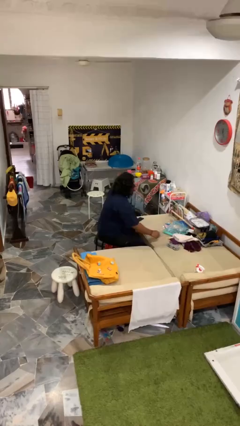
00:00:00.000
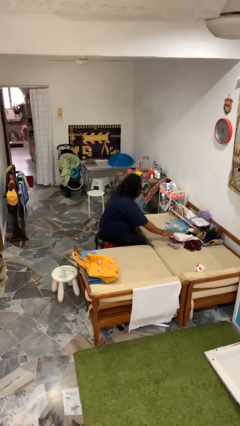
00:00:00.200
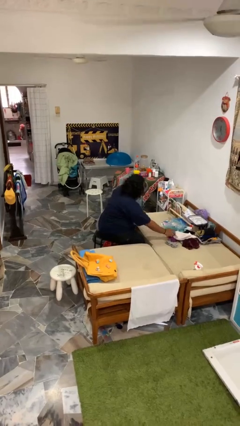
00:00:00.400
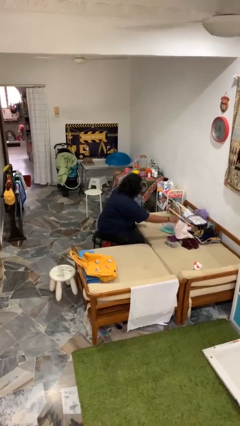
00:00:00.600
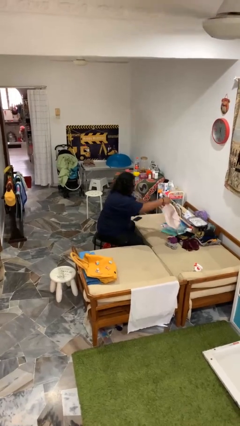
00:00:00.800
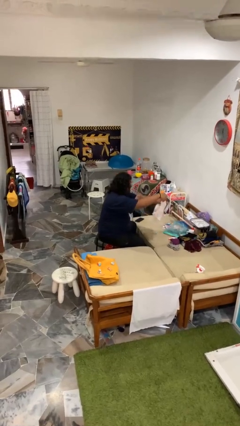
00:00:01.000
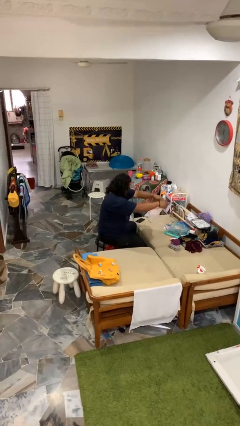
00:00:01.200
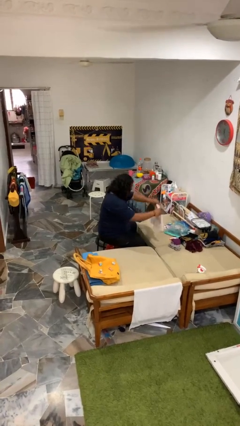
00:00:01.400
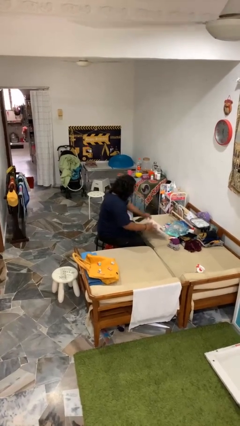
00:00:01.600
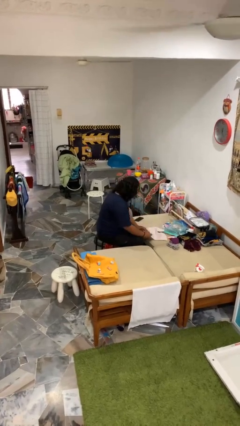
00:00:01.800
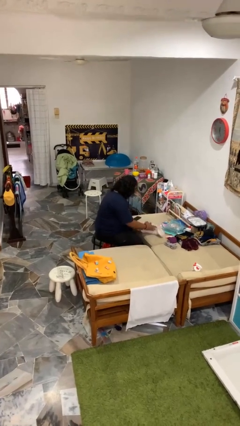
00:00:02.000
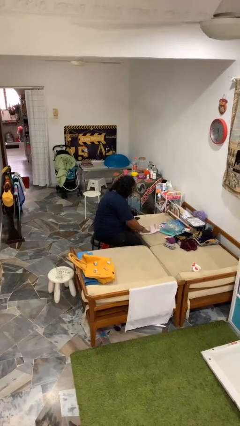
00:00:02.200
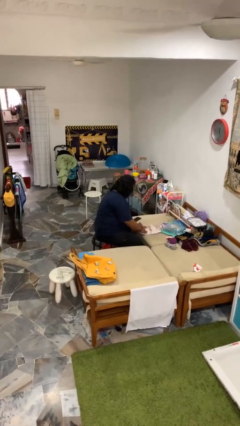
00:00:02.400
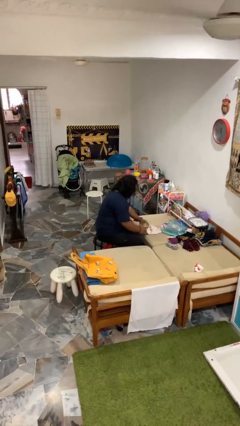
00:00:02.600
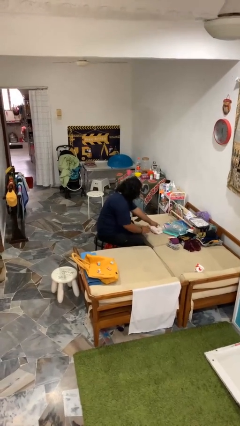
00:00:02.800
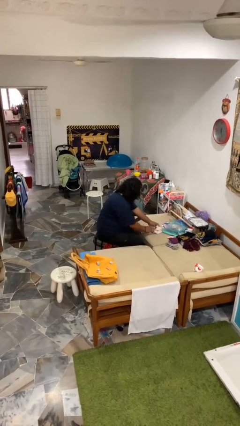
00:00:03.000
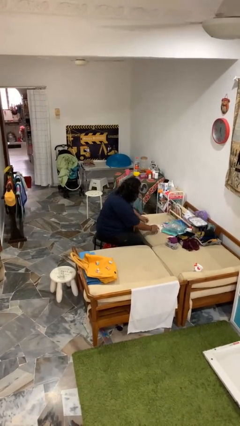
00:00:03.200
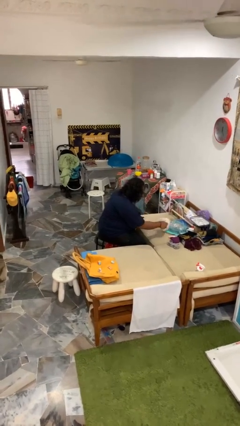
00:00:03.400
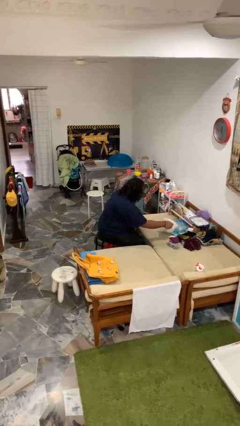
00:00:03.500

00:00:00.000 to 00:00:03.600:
person folds pants

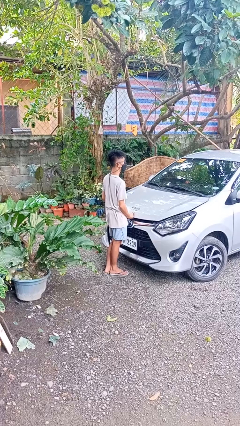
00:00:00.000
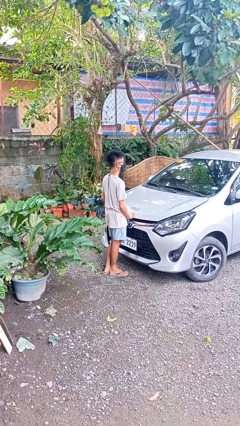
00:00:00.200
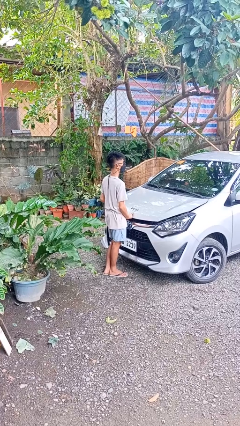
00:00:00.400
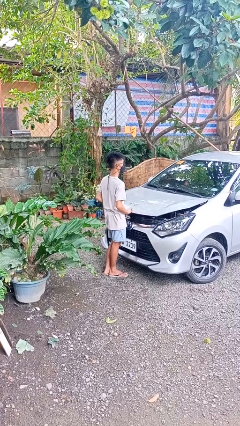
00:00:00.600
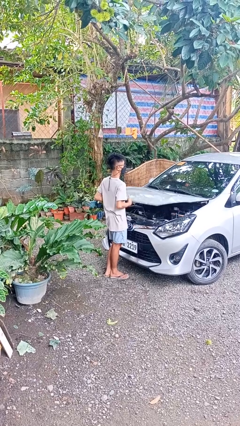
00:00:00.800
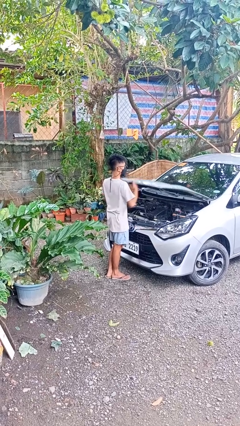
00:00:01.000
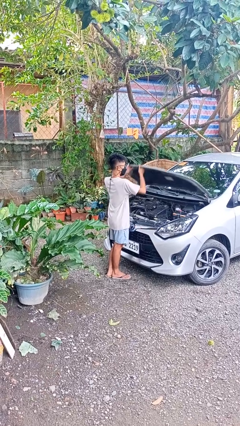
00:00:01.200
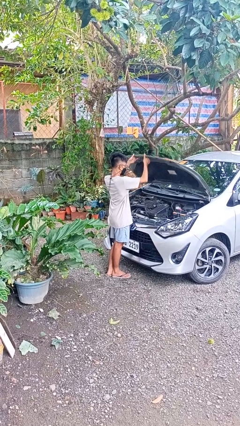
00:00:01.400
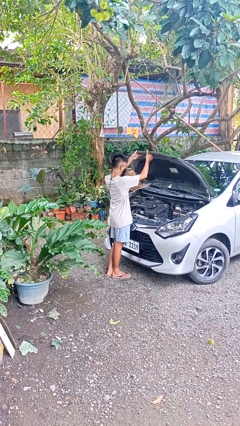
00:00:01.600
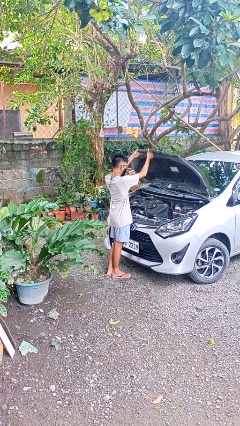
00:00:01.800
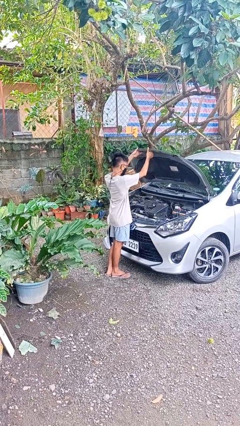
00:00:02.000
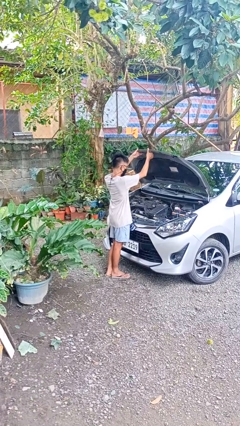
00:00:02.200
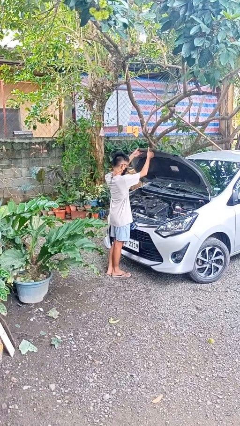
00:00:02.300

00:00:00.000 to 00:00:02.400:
person opens car hood

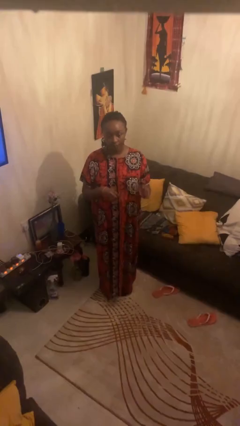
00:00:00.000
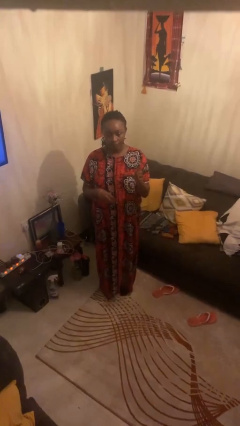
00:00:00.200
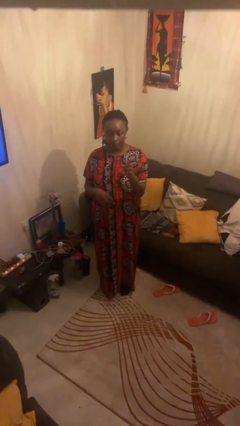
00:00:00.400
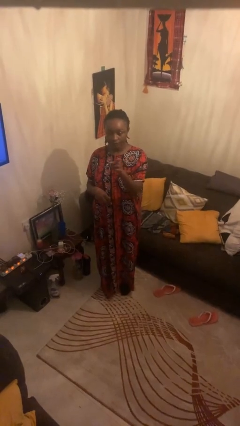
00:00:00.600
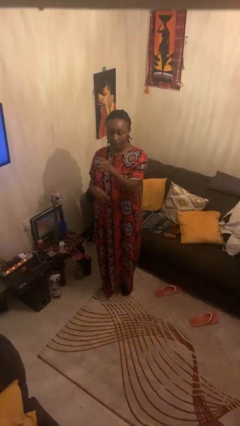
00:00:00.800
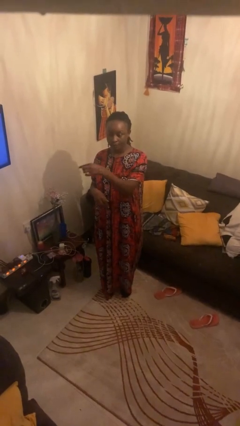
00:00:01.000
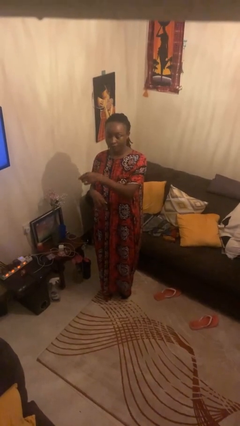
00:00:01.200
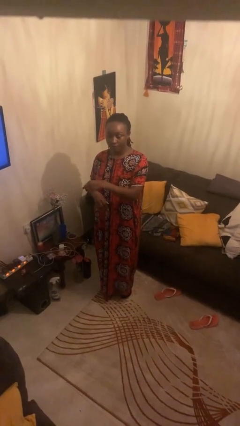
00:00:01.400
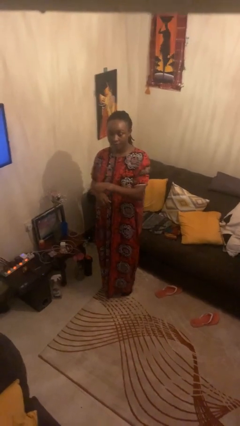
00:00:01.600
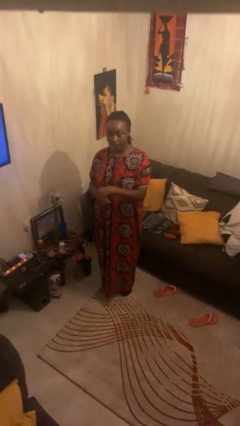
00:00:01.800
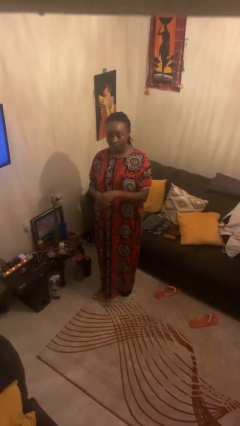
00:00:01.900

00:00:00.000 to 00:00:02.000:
person gestures swipe right

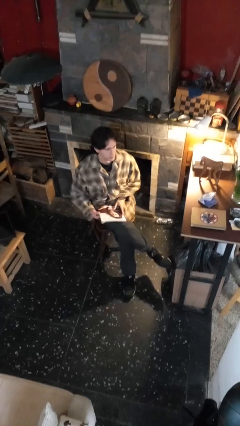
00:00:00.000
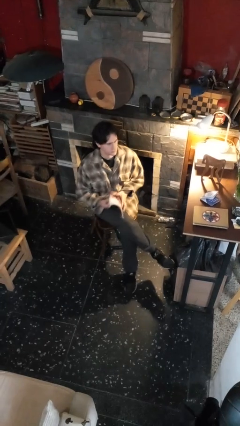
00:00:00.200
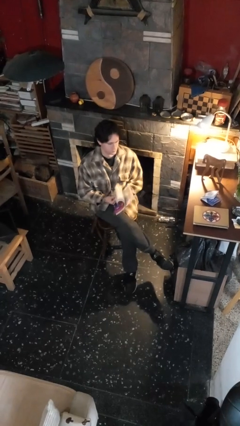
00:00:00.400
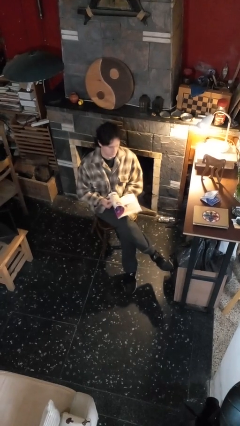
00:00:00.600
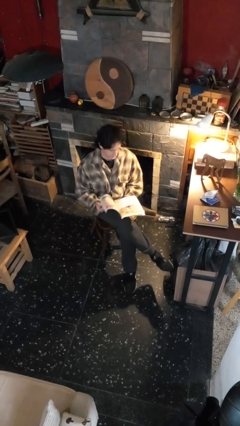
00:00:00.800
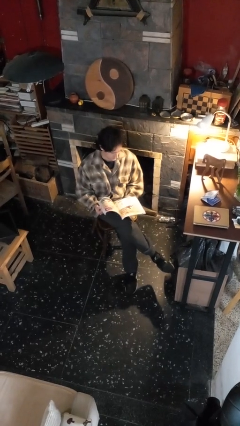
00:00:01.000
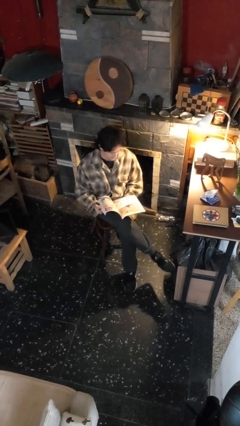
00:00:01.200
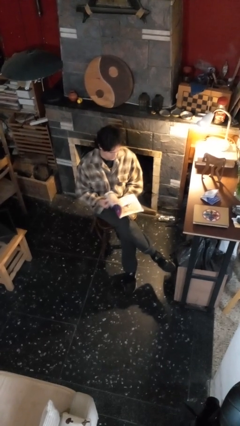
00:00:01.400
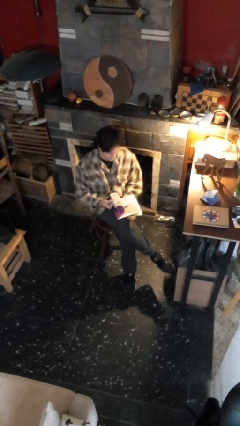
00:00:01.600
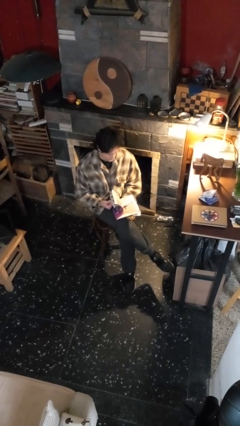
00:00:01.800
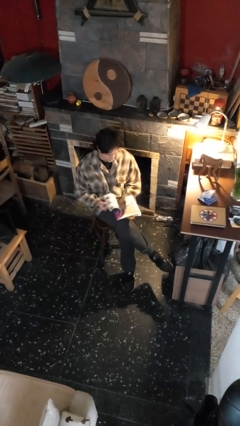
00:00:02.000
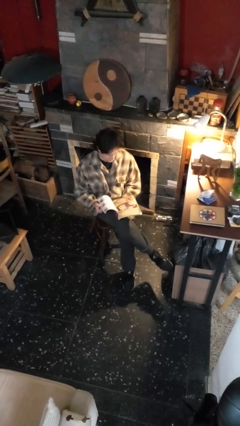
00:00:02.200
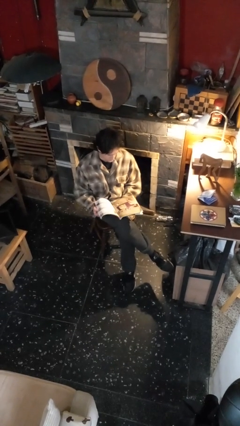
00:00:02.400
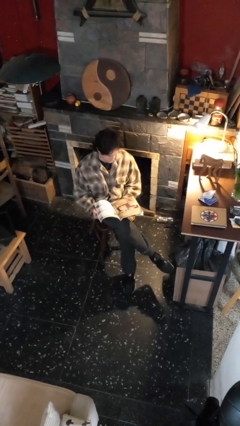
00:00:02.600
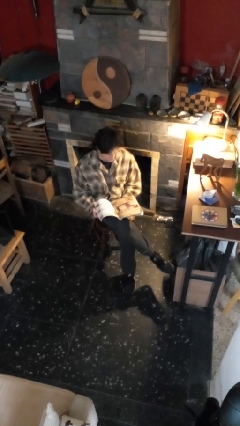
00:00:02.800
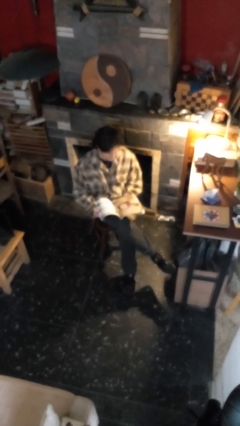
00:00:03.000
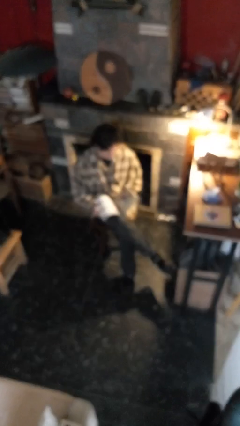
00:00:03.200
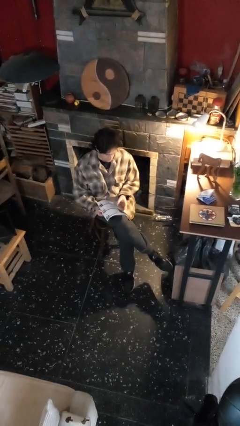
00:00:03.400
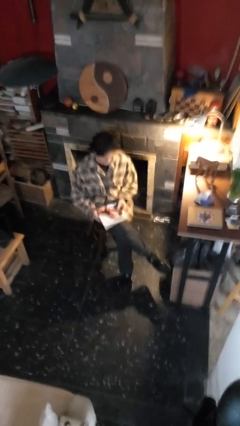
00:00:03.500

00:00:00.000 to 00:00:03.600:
person reads magazine

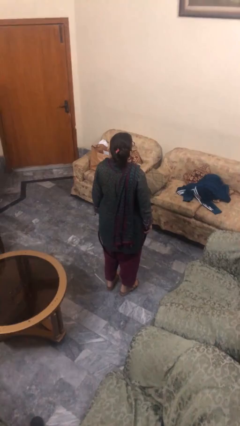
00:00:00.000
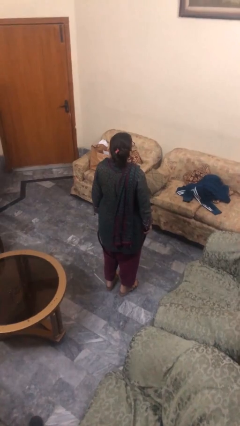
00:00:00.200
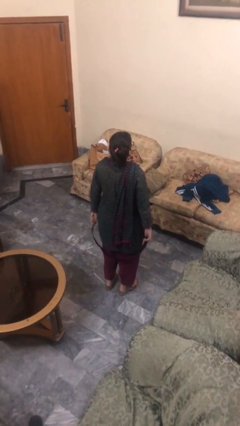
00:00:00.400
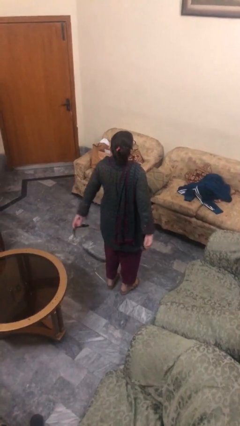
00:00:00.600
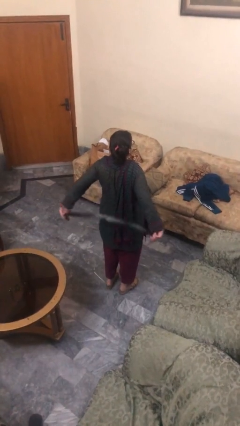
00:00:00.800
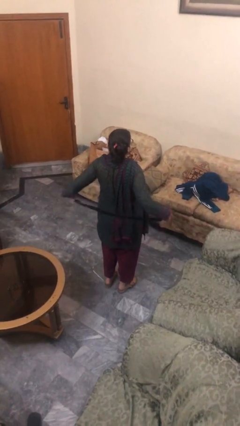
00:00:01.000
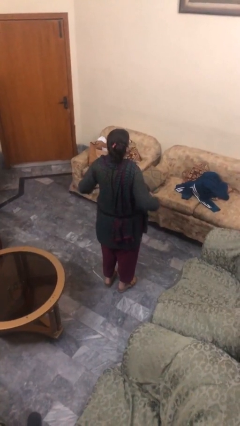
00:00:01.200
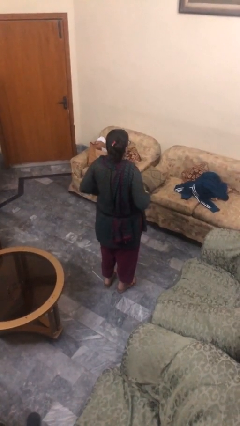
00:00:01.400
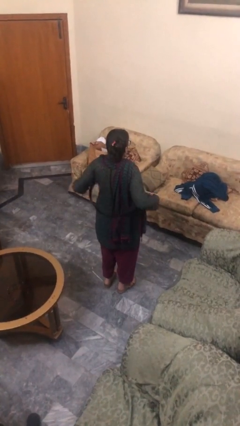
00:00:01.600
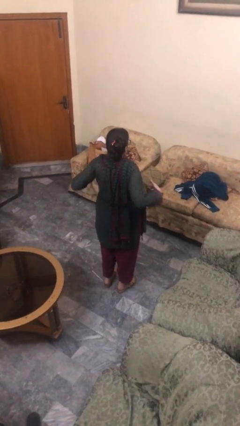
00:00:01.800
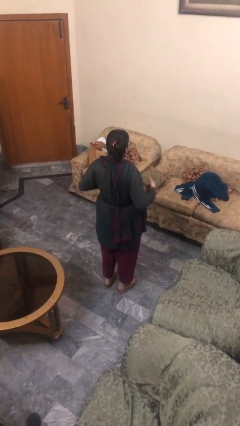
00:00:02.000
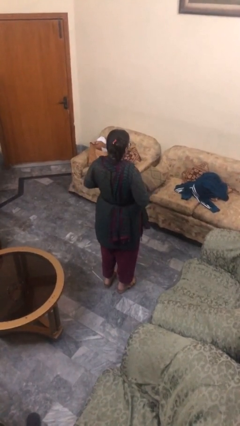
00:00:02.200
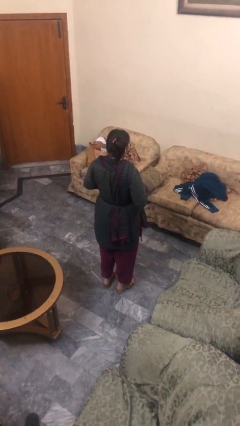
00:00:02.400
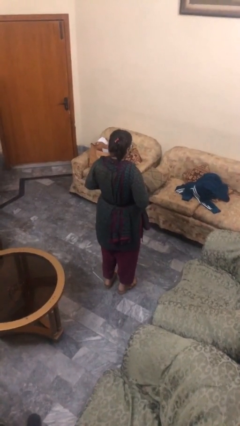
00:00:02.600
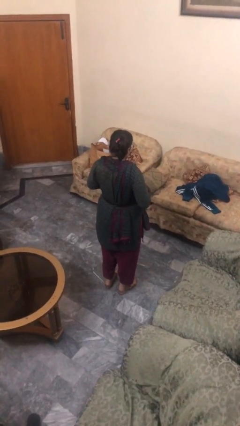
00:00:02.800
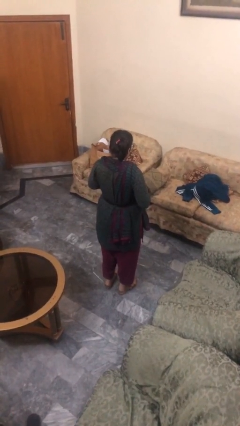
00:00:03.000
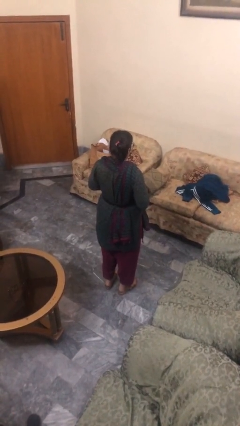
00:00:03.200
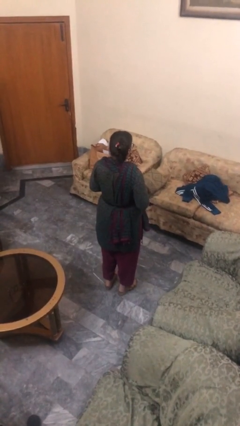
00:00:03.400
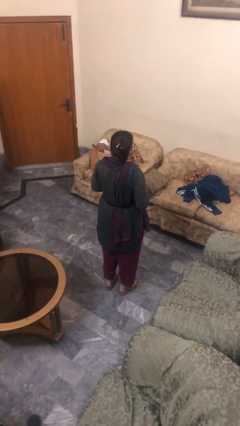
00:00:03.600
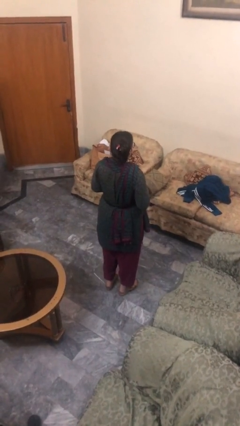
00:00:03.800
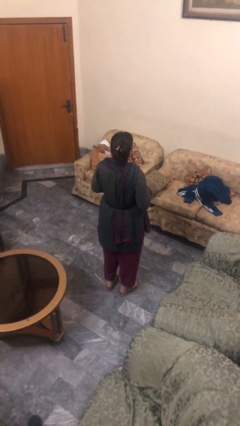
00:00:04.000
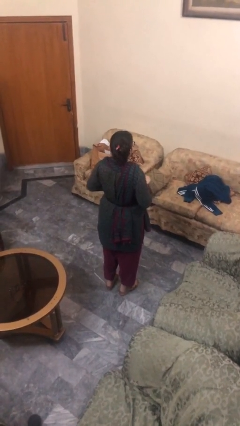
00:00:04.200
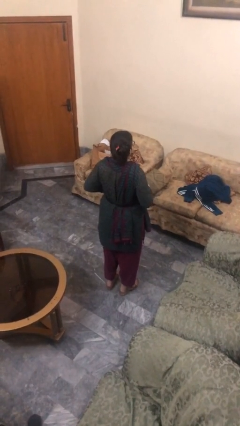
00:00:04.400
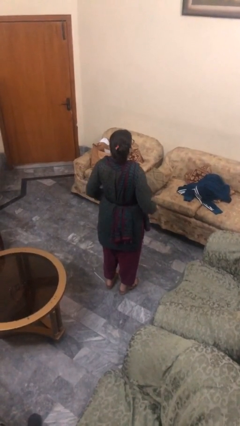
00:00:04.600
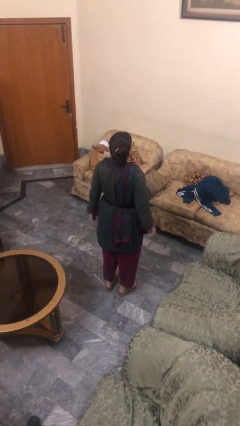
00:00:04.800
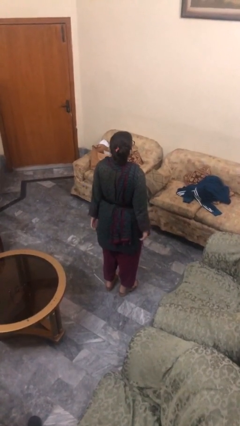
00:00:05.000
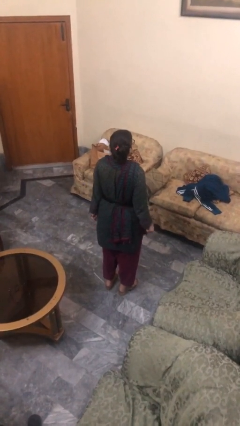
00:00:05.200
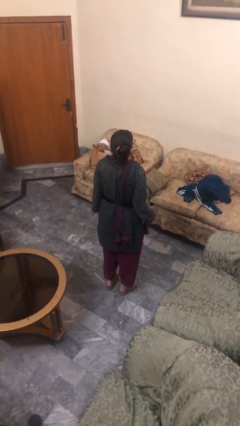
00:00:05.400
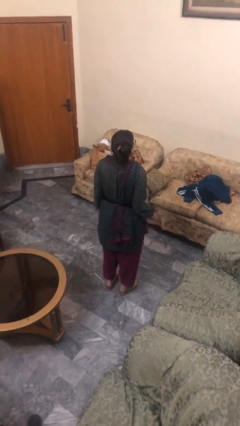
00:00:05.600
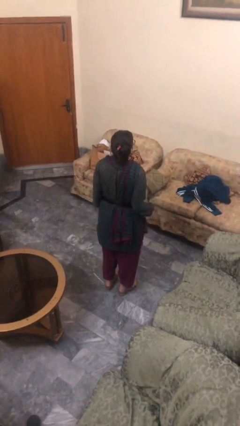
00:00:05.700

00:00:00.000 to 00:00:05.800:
person puts on belt

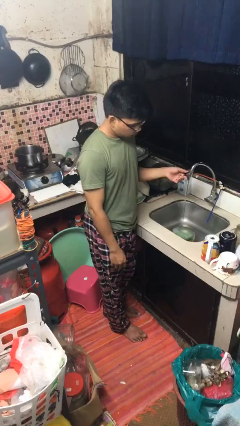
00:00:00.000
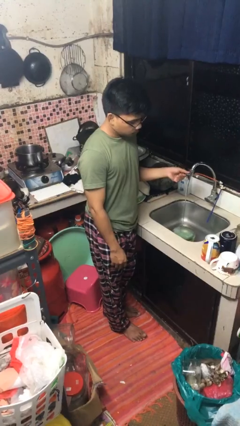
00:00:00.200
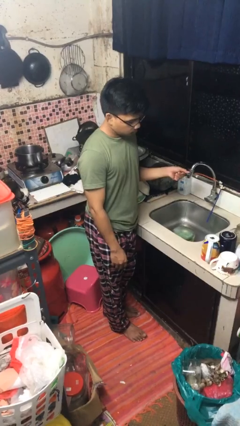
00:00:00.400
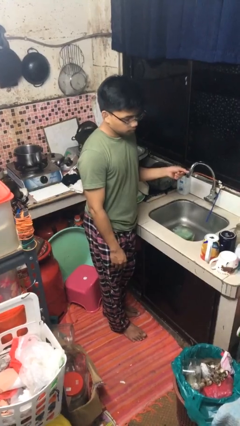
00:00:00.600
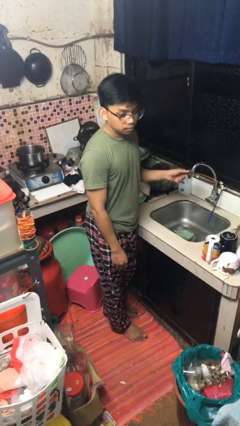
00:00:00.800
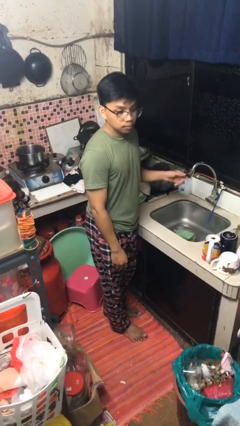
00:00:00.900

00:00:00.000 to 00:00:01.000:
person turns off faucet
